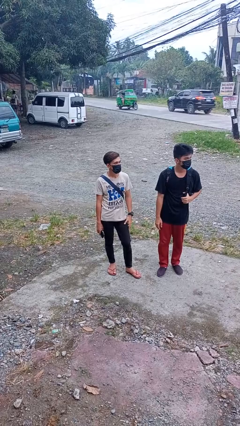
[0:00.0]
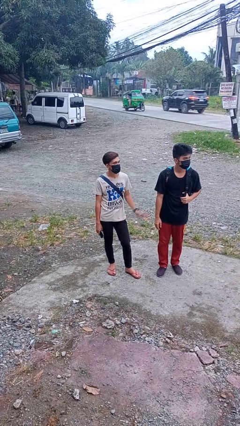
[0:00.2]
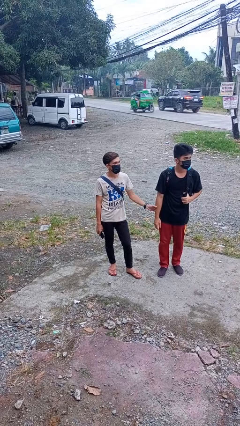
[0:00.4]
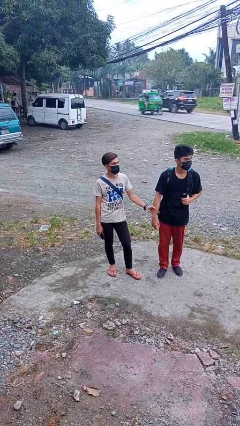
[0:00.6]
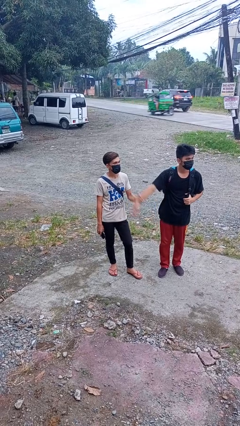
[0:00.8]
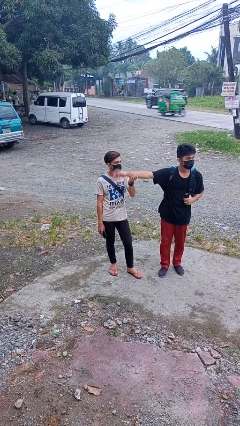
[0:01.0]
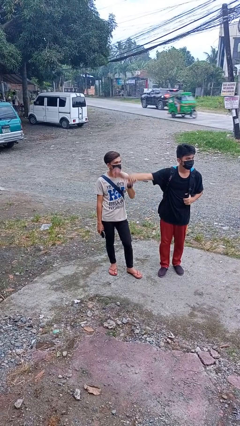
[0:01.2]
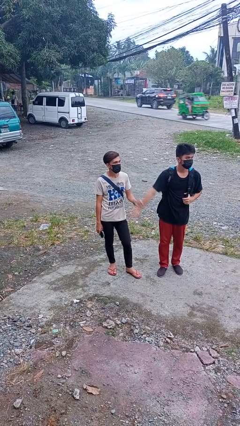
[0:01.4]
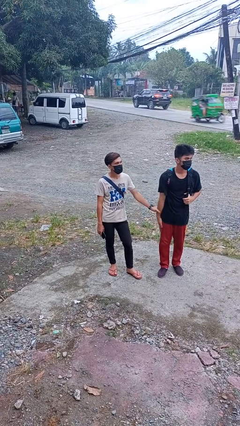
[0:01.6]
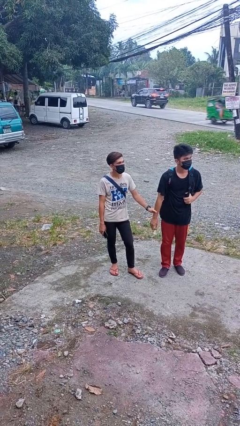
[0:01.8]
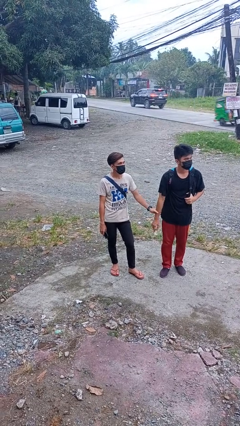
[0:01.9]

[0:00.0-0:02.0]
person grabs person by forearm

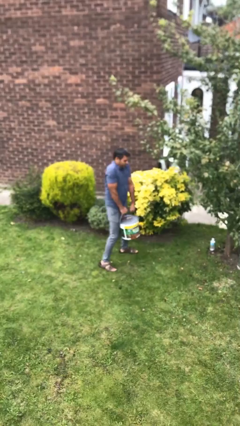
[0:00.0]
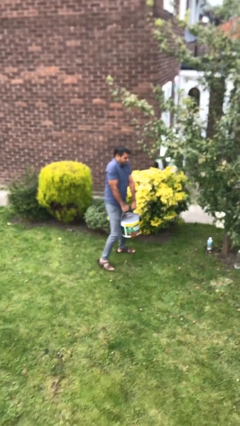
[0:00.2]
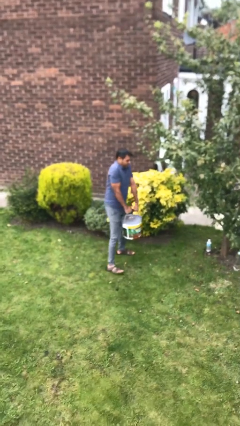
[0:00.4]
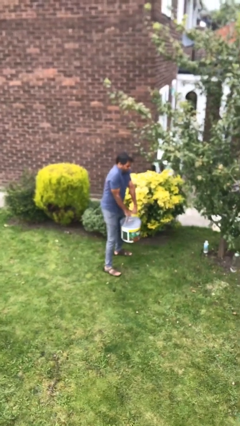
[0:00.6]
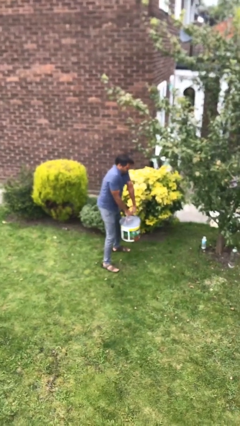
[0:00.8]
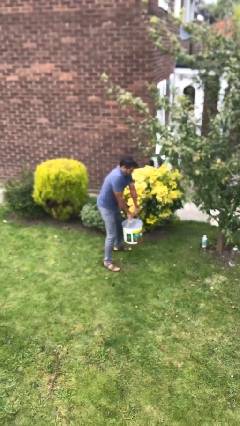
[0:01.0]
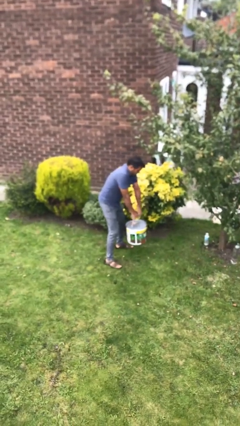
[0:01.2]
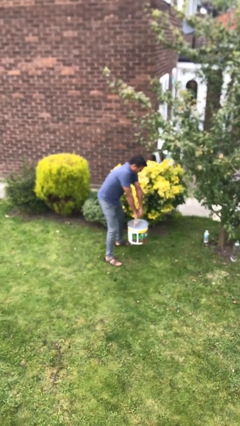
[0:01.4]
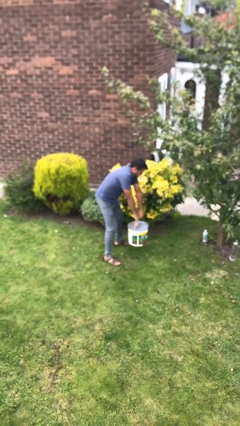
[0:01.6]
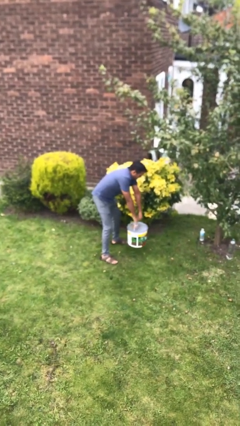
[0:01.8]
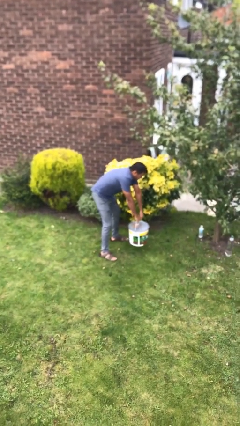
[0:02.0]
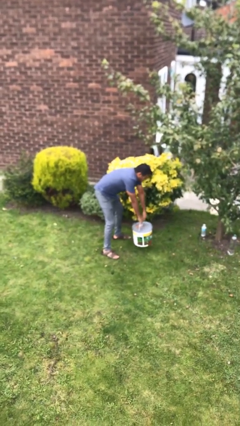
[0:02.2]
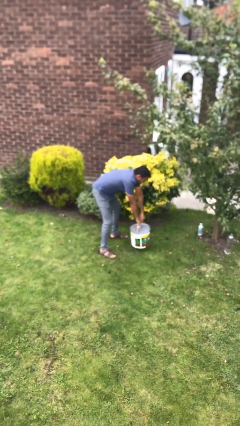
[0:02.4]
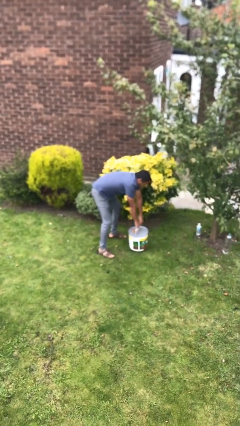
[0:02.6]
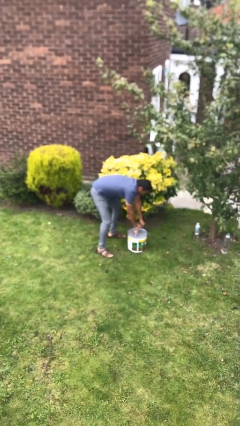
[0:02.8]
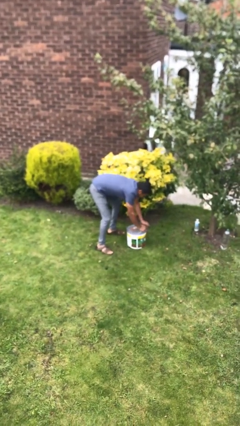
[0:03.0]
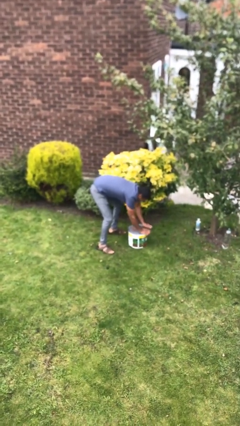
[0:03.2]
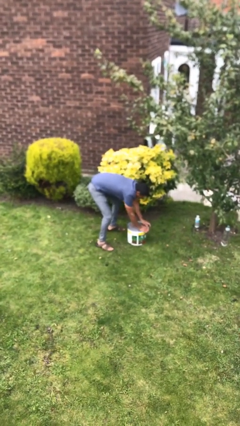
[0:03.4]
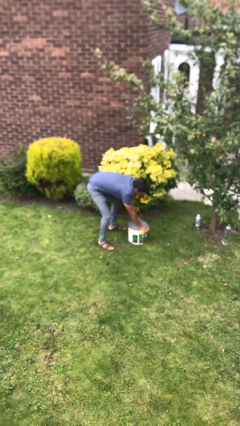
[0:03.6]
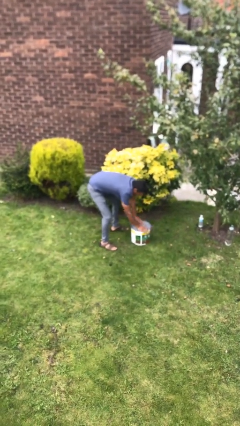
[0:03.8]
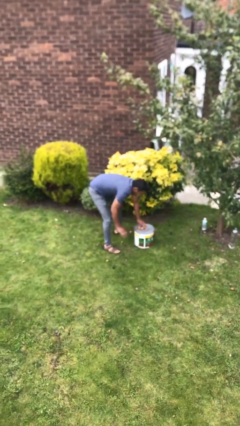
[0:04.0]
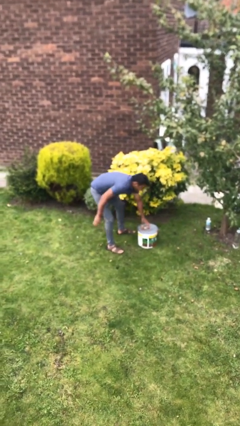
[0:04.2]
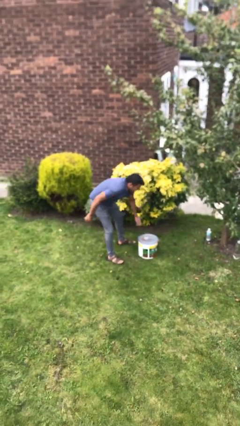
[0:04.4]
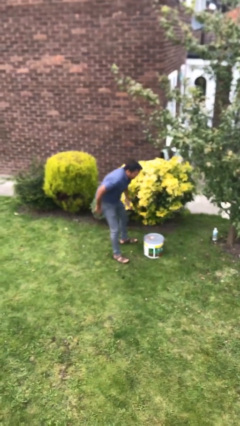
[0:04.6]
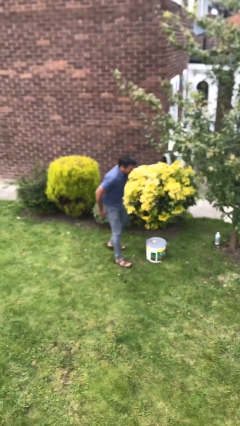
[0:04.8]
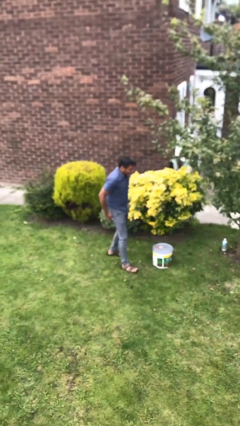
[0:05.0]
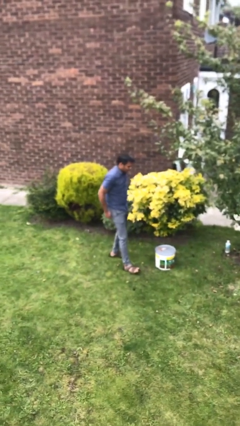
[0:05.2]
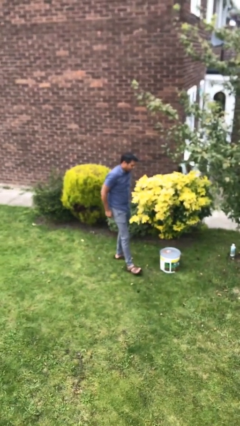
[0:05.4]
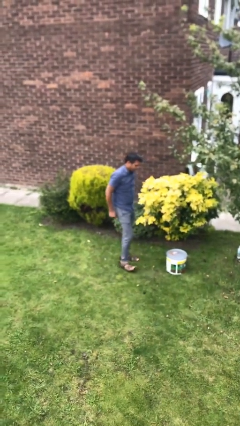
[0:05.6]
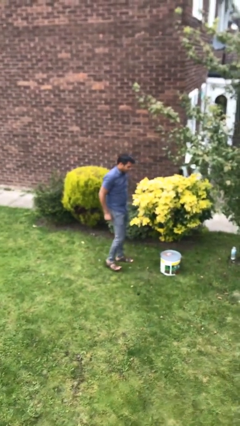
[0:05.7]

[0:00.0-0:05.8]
person puts down object on floor

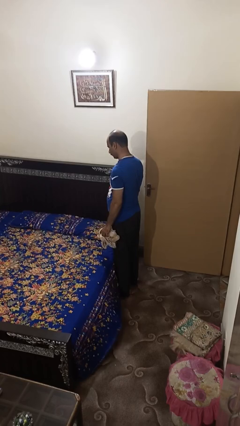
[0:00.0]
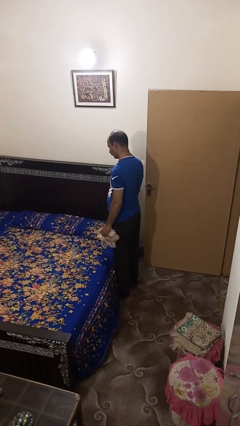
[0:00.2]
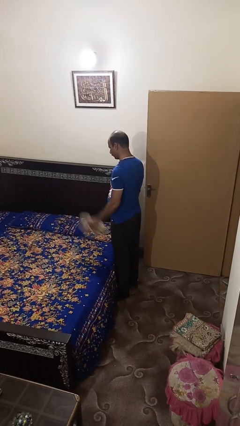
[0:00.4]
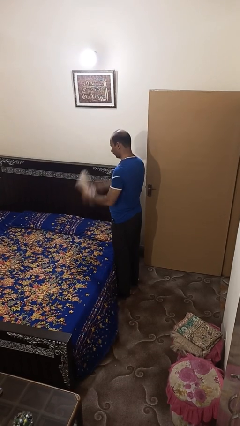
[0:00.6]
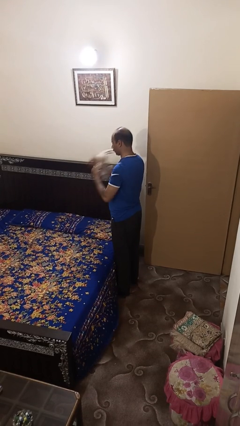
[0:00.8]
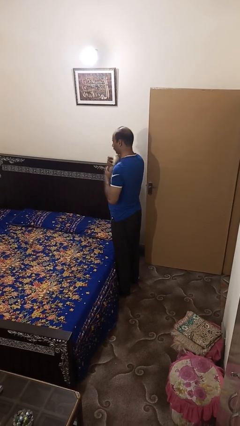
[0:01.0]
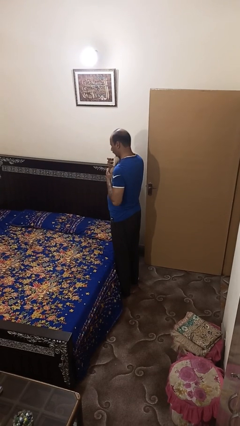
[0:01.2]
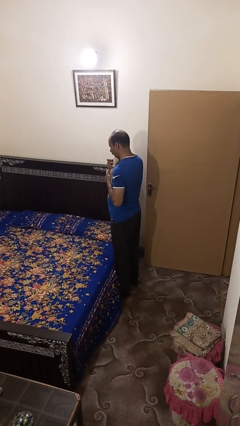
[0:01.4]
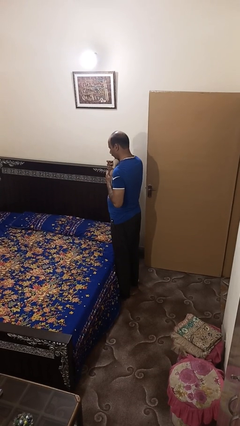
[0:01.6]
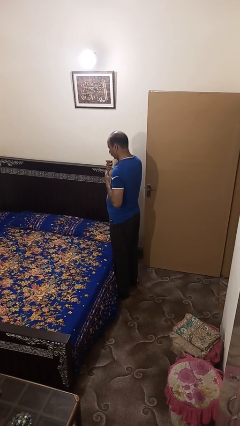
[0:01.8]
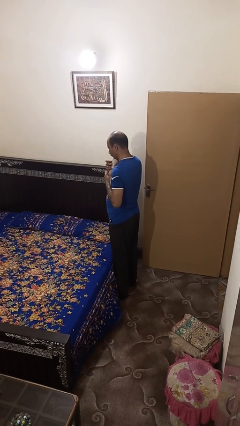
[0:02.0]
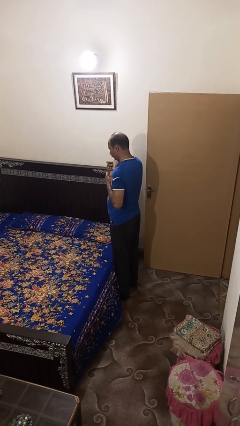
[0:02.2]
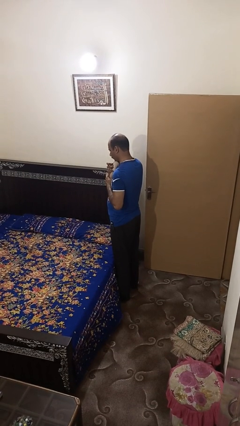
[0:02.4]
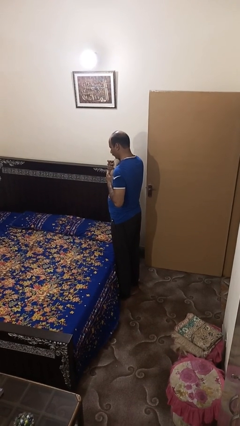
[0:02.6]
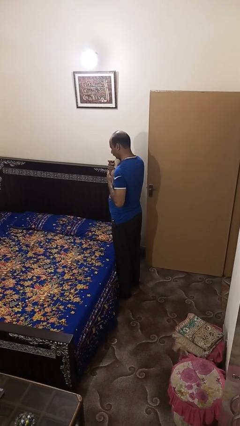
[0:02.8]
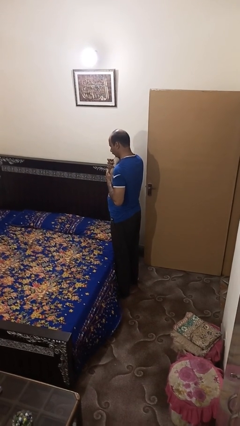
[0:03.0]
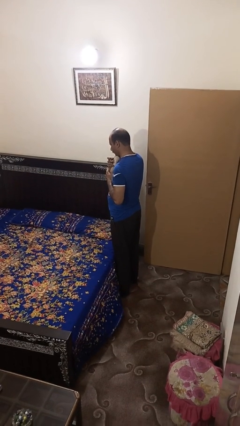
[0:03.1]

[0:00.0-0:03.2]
person hugs stuffed animal

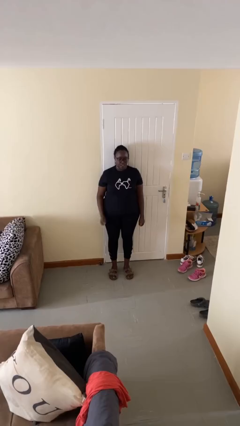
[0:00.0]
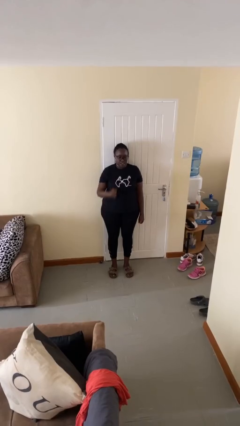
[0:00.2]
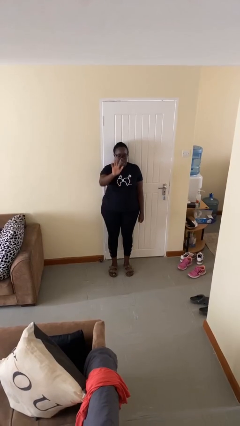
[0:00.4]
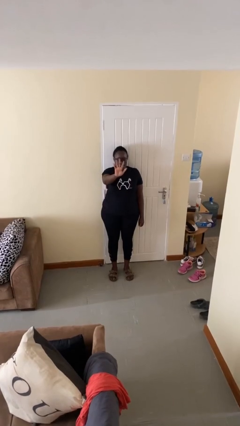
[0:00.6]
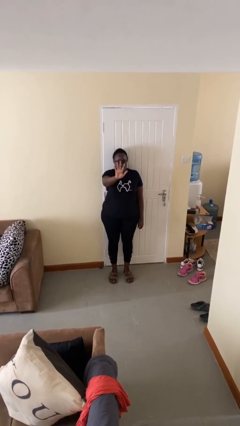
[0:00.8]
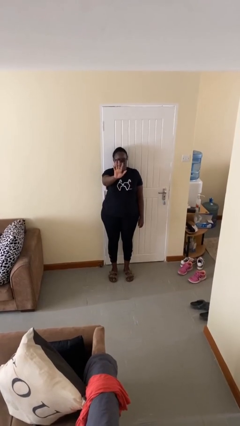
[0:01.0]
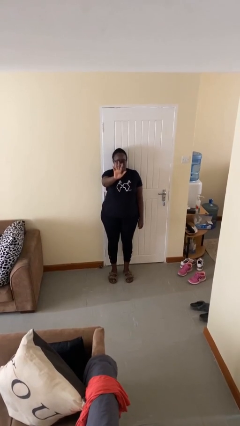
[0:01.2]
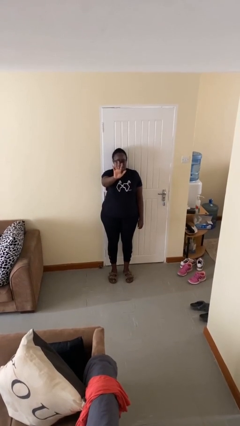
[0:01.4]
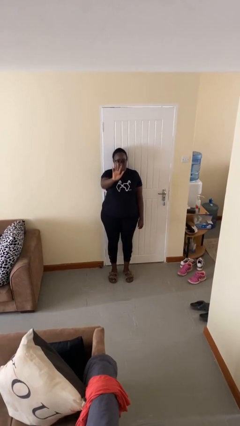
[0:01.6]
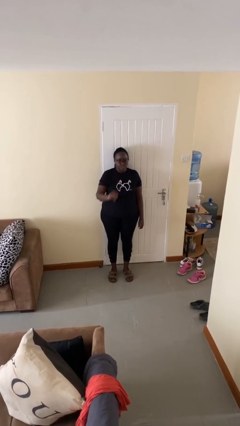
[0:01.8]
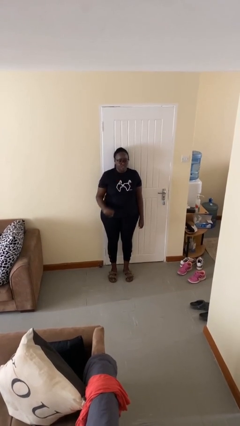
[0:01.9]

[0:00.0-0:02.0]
person gestures number five

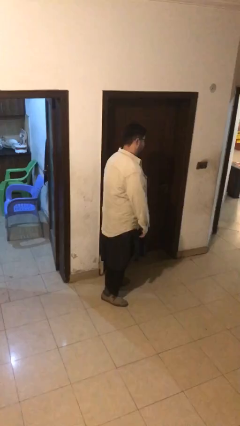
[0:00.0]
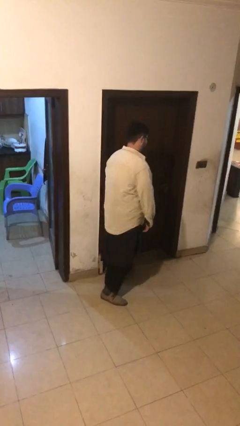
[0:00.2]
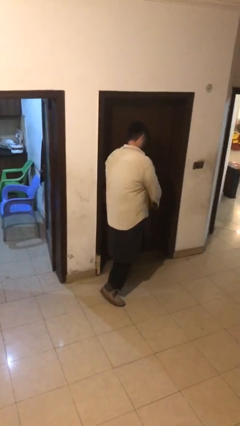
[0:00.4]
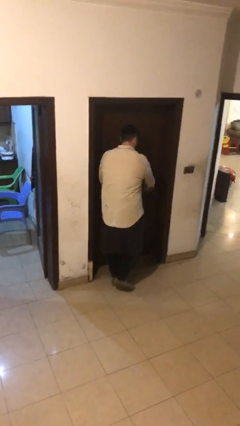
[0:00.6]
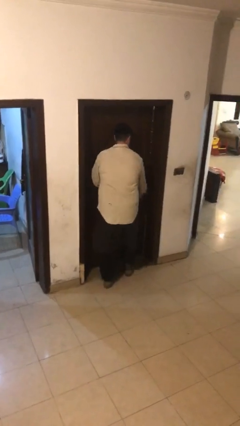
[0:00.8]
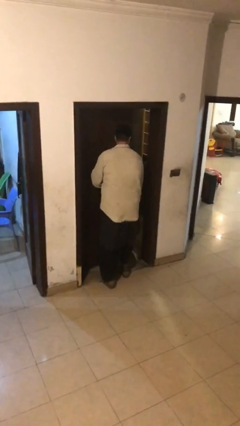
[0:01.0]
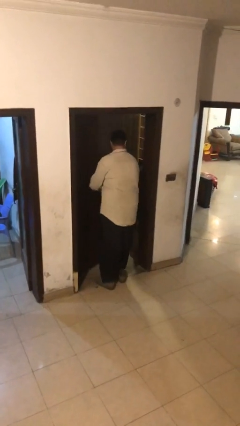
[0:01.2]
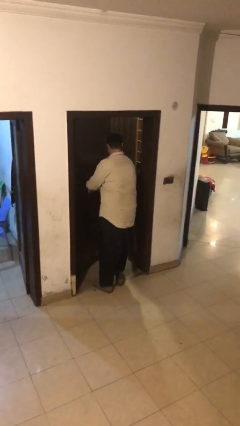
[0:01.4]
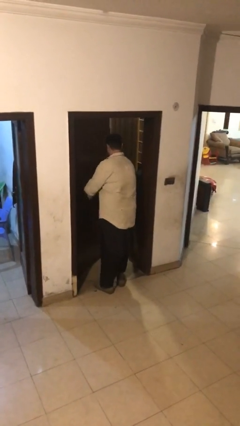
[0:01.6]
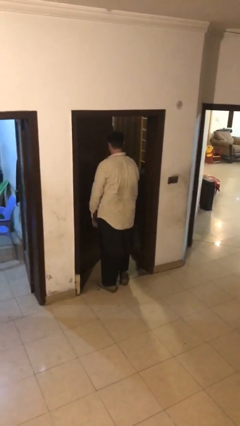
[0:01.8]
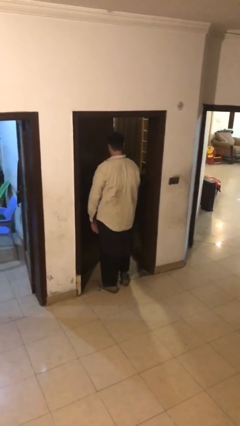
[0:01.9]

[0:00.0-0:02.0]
person opens facility door

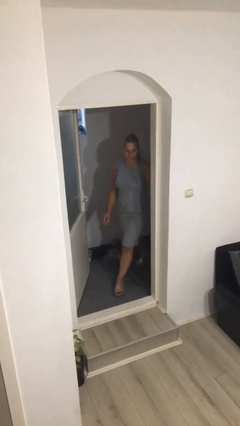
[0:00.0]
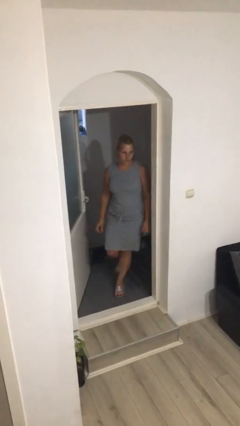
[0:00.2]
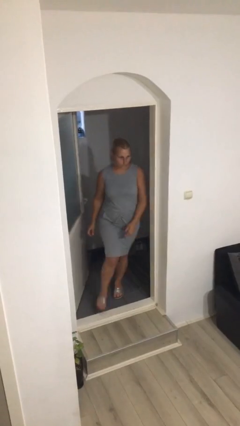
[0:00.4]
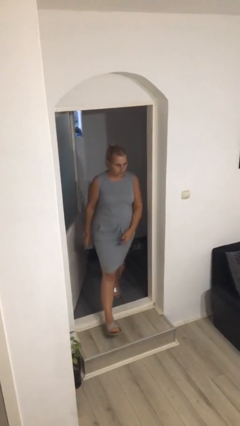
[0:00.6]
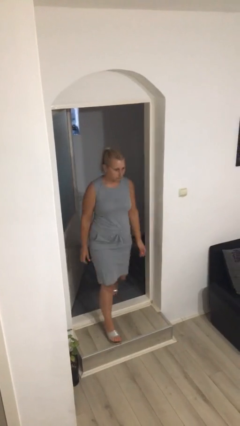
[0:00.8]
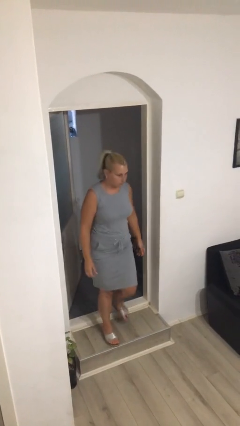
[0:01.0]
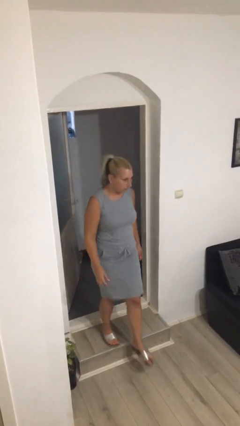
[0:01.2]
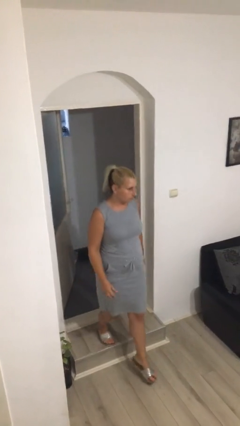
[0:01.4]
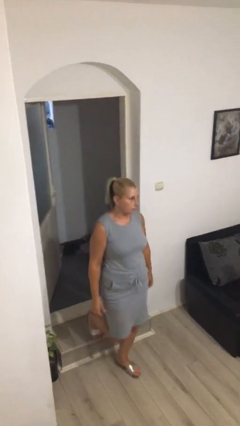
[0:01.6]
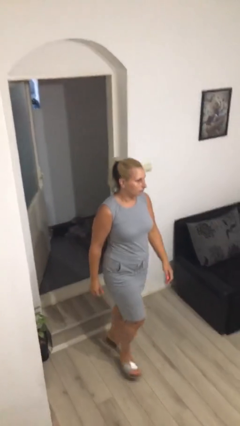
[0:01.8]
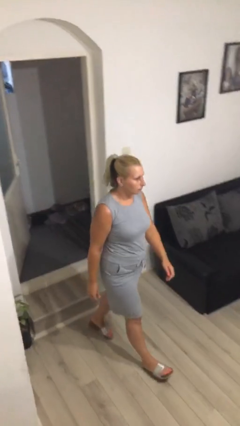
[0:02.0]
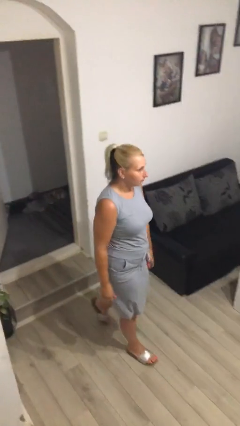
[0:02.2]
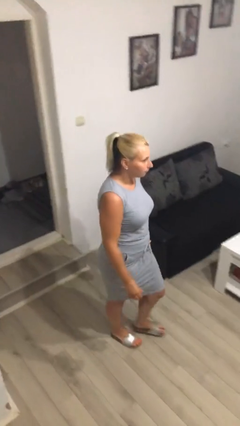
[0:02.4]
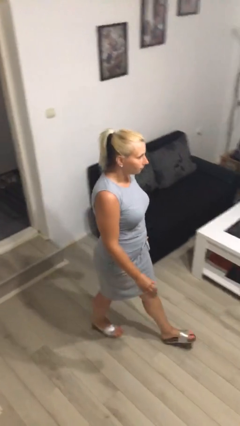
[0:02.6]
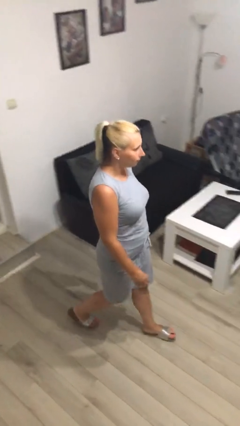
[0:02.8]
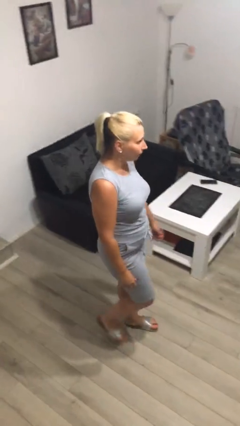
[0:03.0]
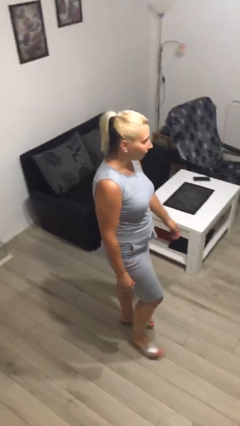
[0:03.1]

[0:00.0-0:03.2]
person enters scene through structure
